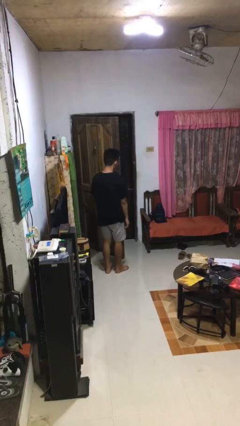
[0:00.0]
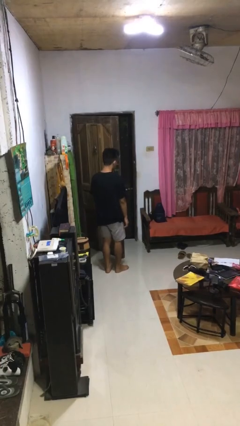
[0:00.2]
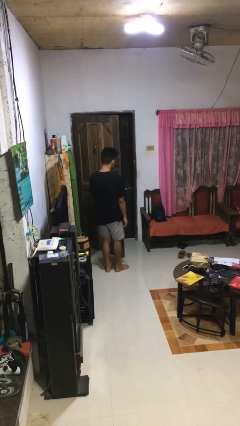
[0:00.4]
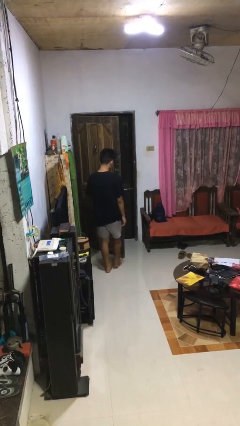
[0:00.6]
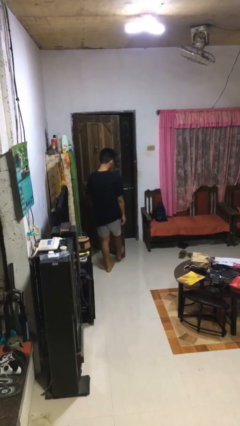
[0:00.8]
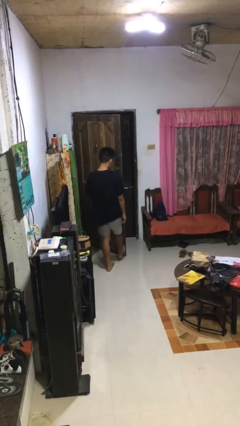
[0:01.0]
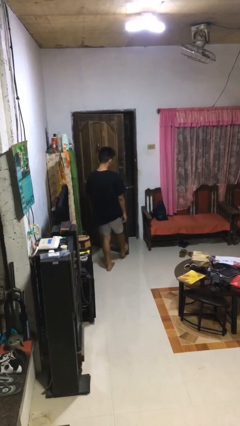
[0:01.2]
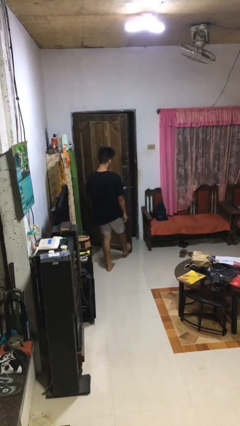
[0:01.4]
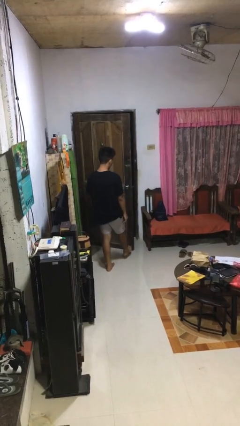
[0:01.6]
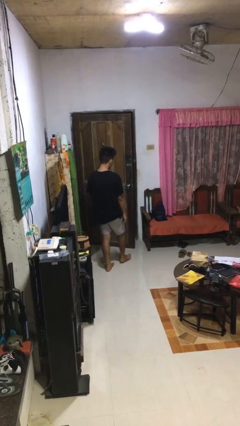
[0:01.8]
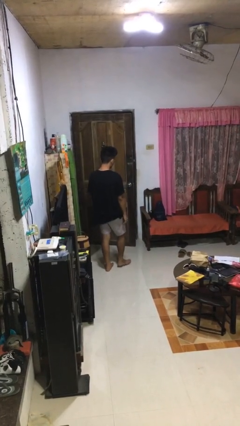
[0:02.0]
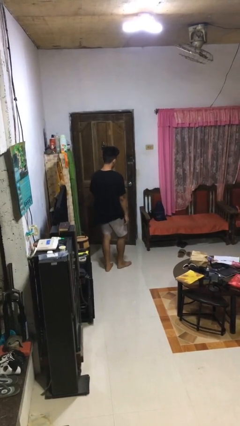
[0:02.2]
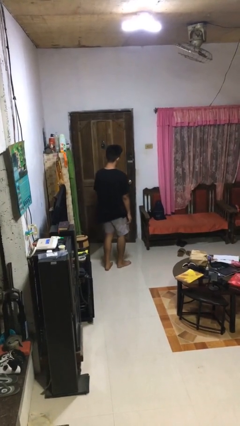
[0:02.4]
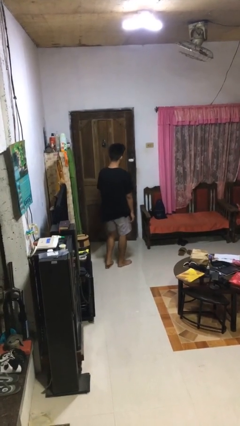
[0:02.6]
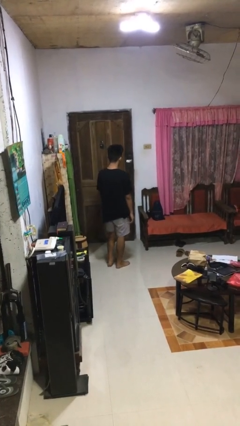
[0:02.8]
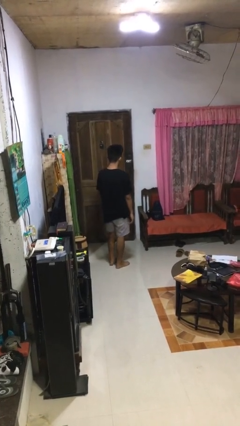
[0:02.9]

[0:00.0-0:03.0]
person closes door with foot

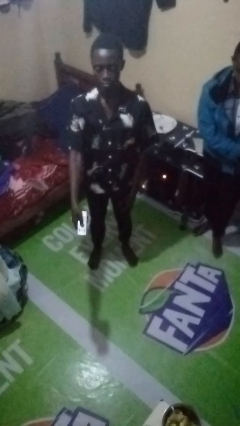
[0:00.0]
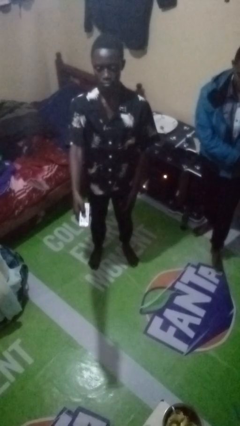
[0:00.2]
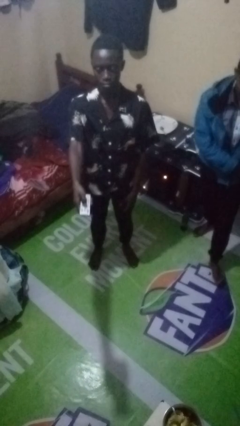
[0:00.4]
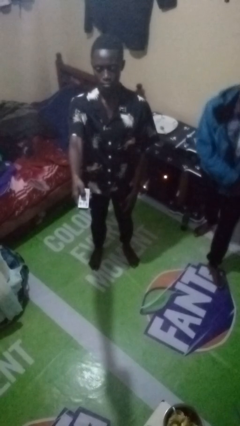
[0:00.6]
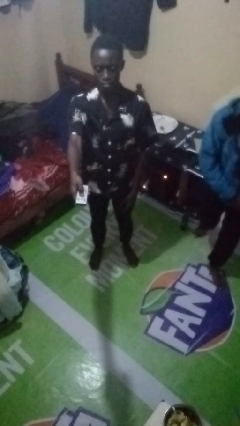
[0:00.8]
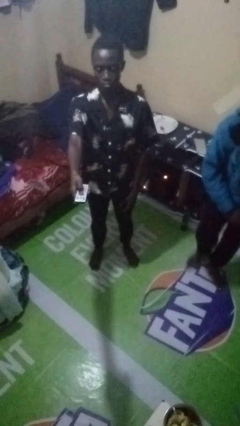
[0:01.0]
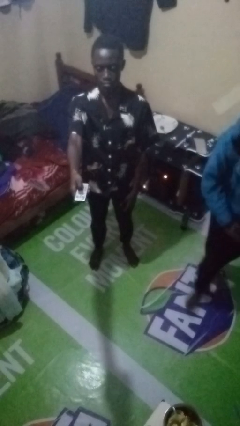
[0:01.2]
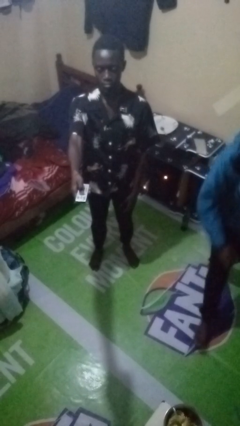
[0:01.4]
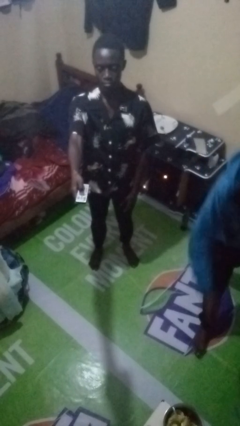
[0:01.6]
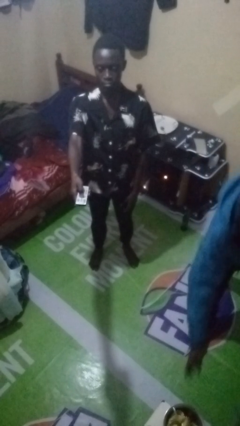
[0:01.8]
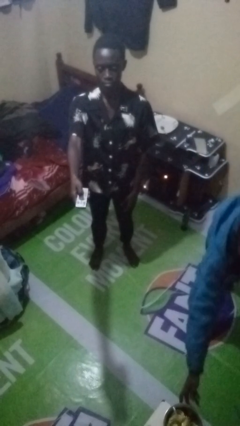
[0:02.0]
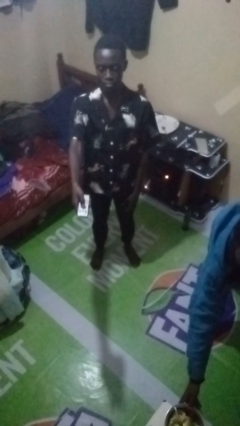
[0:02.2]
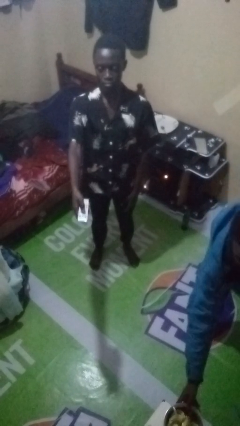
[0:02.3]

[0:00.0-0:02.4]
person uses television remote

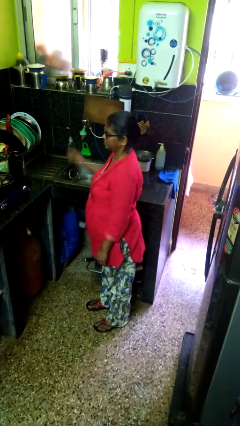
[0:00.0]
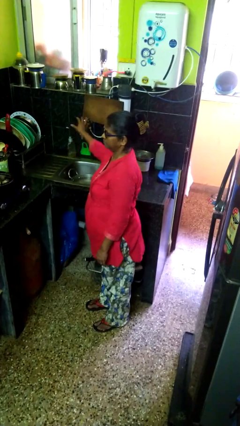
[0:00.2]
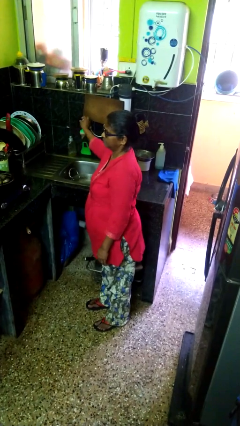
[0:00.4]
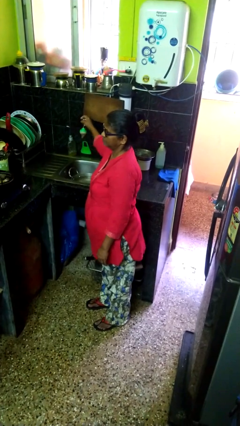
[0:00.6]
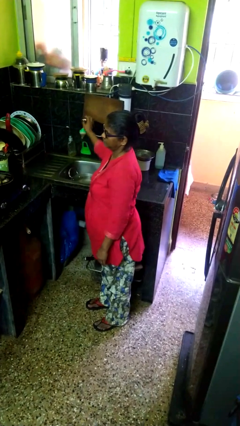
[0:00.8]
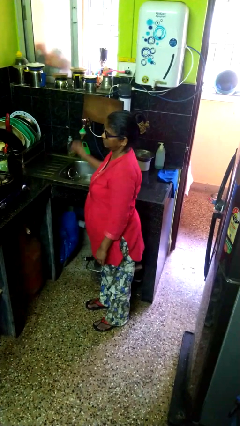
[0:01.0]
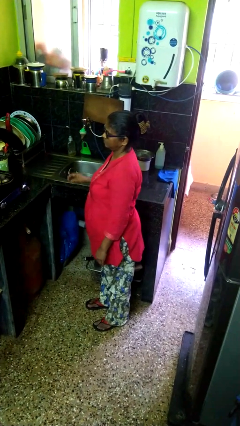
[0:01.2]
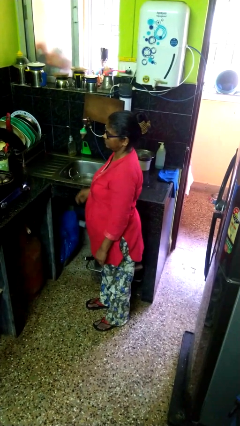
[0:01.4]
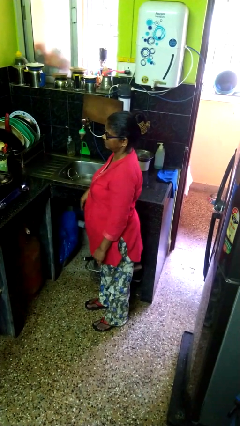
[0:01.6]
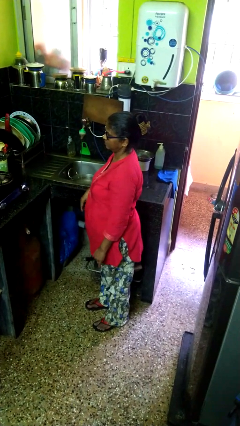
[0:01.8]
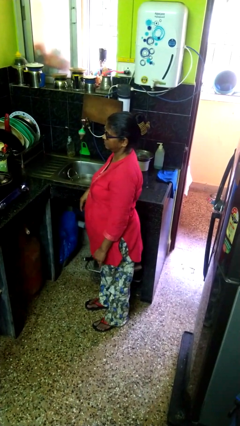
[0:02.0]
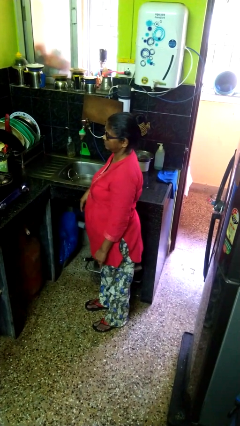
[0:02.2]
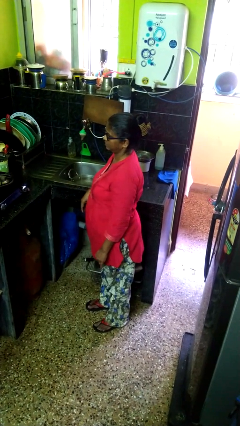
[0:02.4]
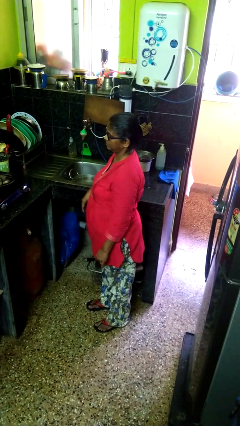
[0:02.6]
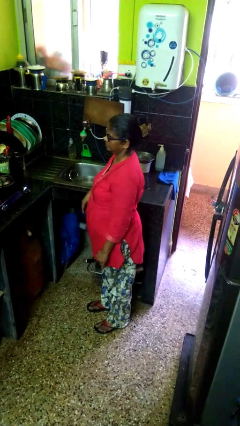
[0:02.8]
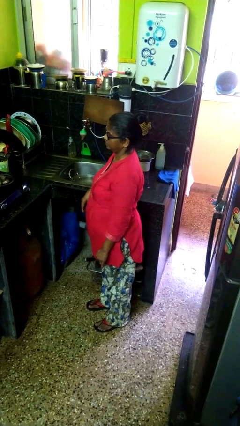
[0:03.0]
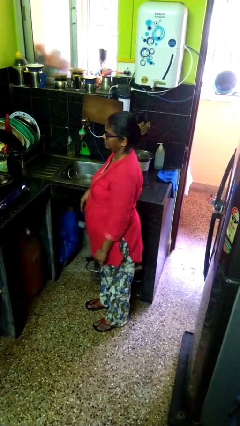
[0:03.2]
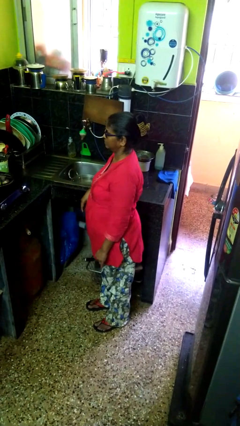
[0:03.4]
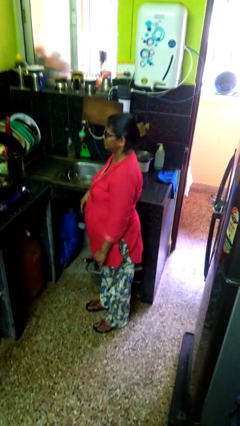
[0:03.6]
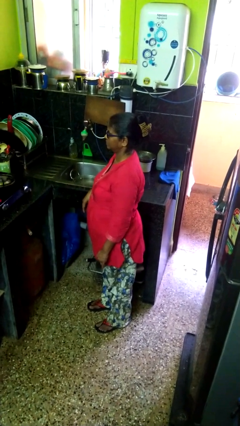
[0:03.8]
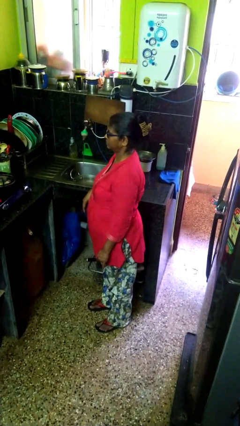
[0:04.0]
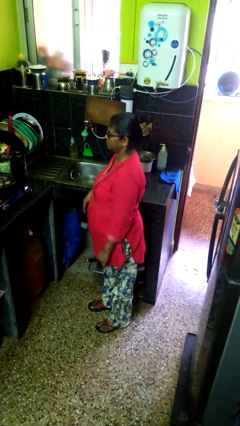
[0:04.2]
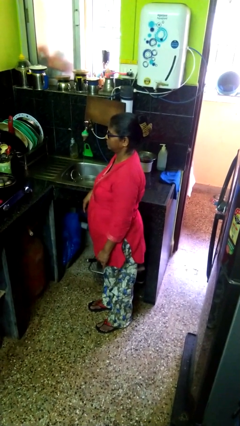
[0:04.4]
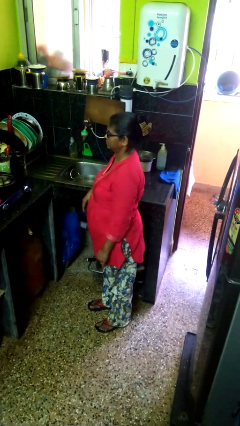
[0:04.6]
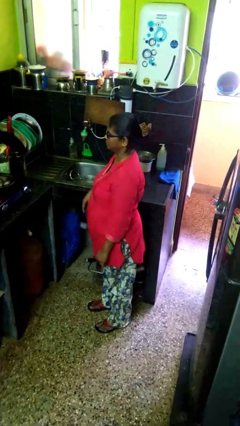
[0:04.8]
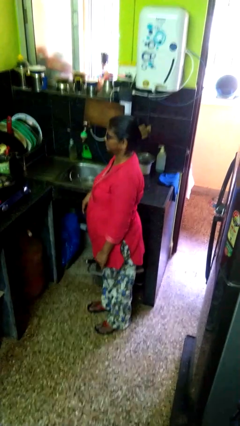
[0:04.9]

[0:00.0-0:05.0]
person turns on faucet

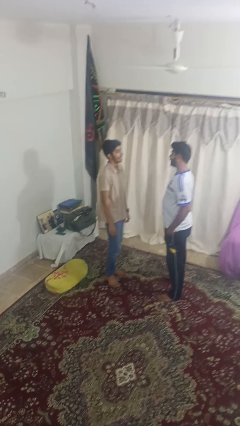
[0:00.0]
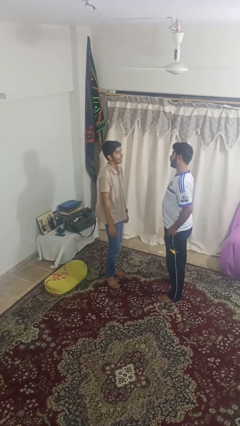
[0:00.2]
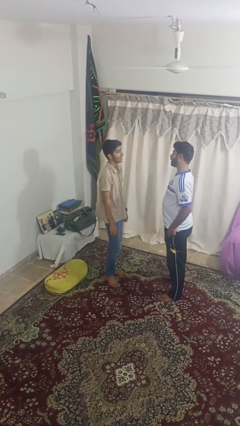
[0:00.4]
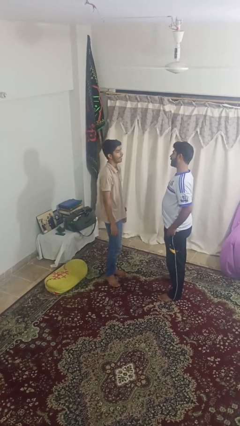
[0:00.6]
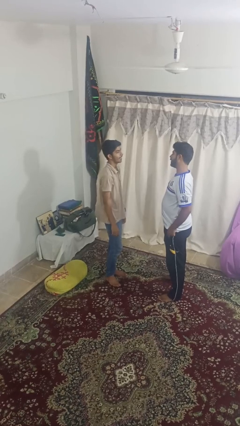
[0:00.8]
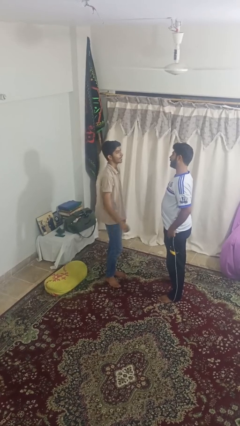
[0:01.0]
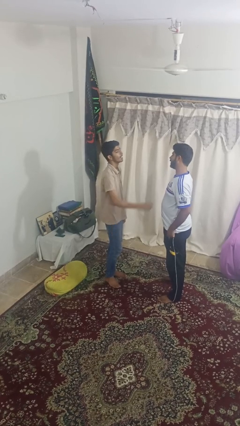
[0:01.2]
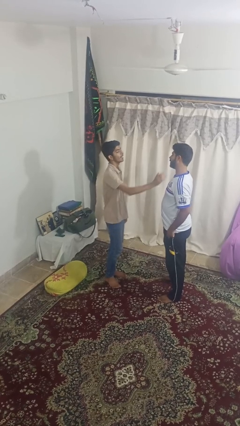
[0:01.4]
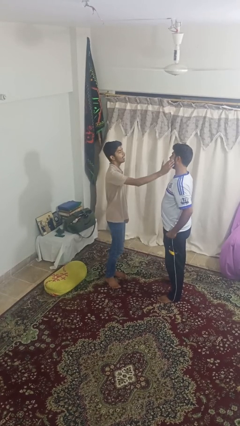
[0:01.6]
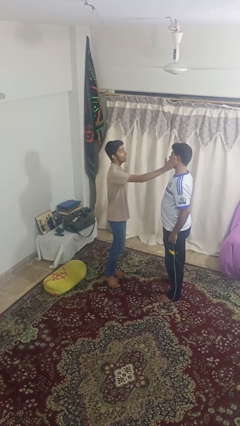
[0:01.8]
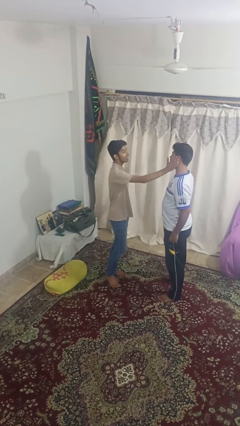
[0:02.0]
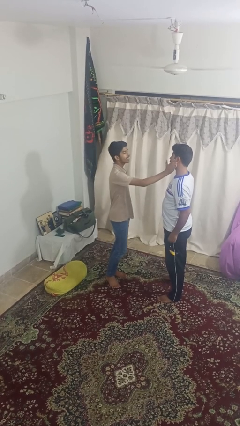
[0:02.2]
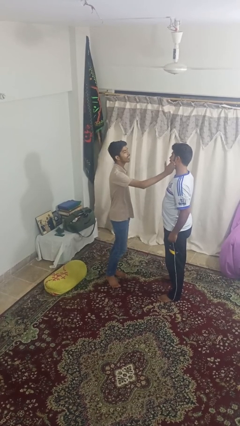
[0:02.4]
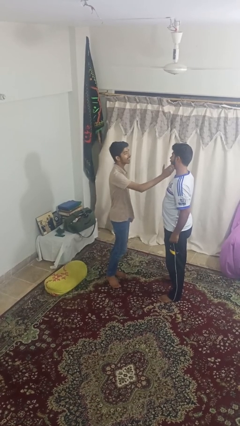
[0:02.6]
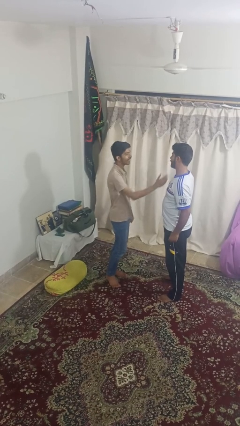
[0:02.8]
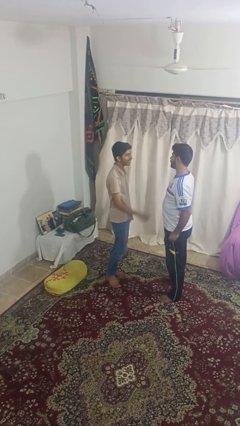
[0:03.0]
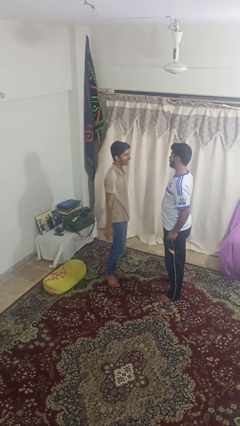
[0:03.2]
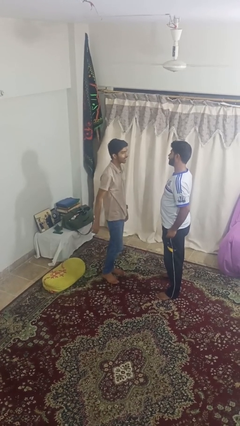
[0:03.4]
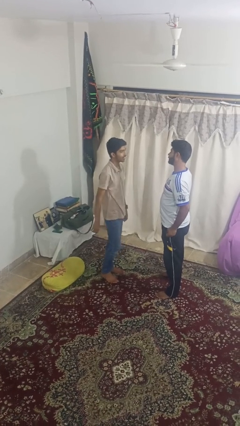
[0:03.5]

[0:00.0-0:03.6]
person touches face of person

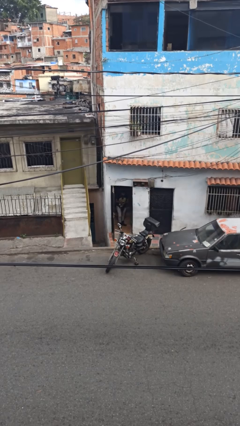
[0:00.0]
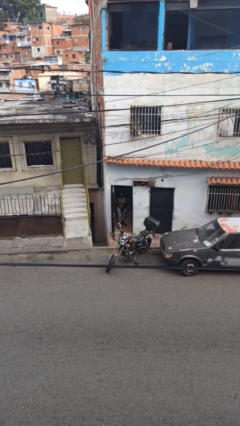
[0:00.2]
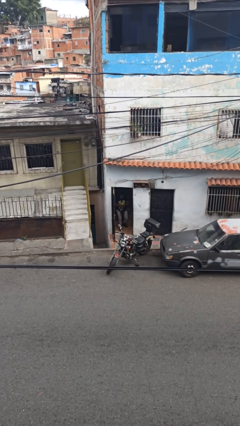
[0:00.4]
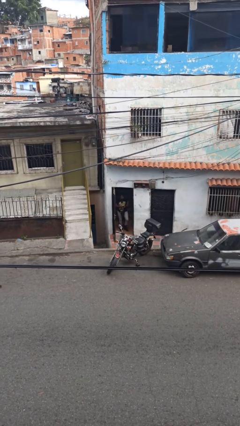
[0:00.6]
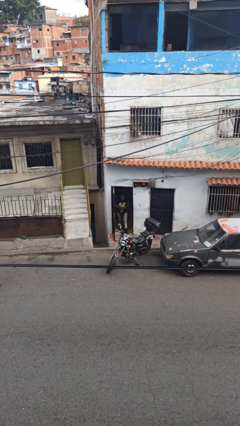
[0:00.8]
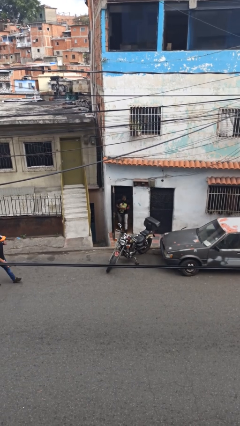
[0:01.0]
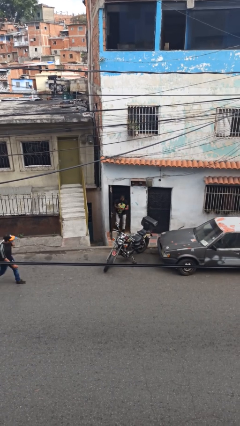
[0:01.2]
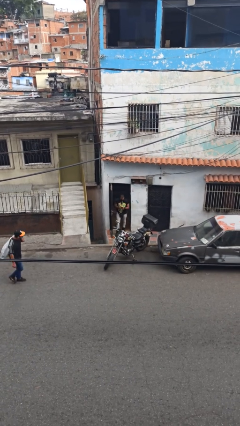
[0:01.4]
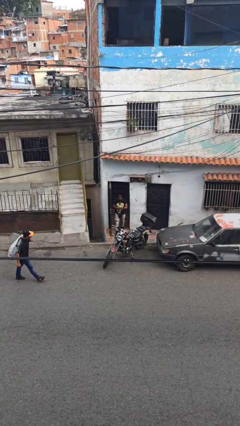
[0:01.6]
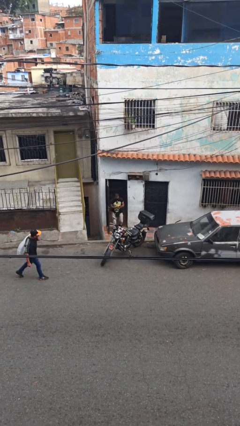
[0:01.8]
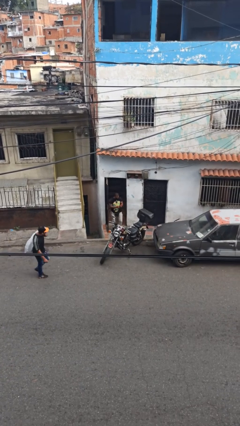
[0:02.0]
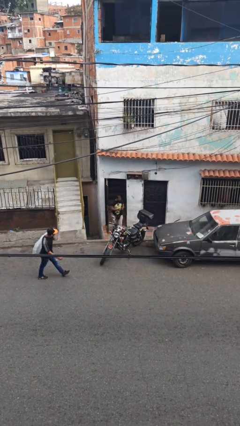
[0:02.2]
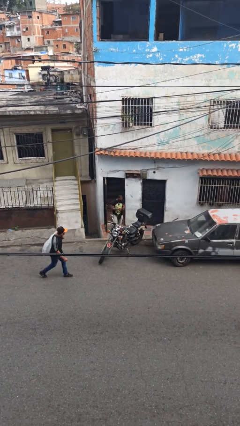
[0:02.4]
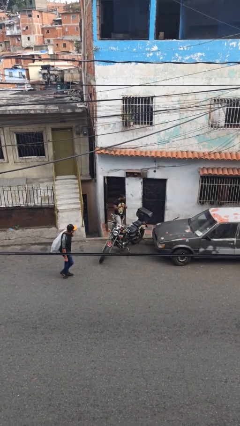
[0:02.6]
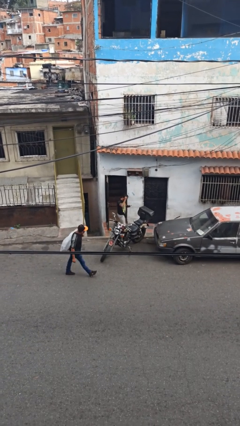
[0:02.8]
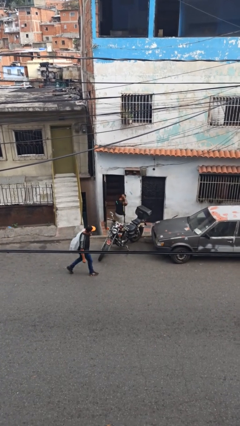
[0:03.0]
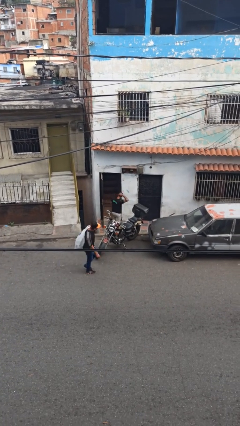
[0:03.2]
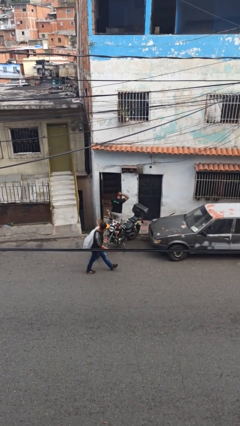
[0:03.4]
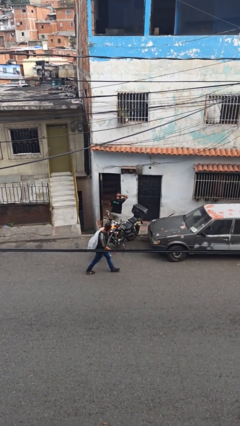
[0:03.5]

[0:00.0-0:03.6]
person enters scene through structure

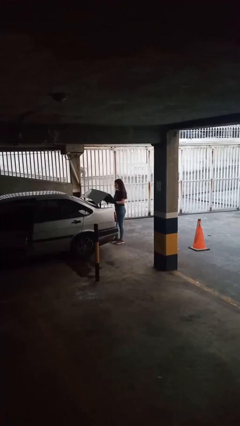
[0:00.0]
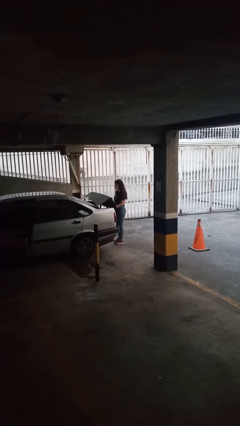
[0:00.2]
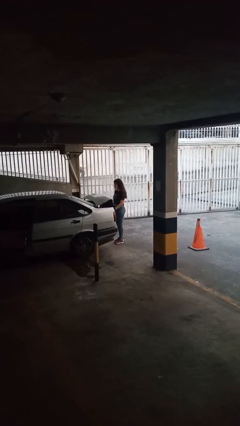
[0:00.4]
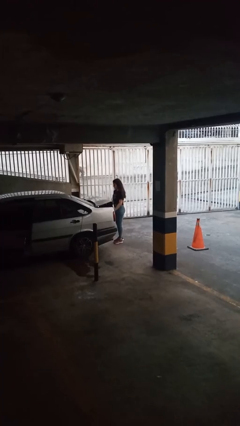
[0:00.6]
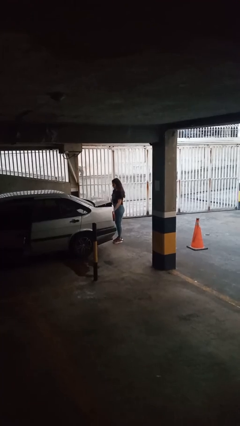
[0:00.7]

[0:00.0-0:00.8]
person closes car trunk
